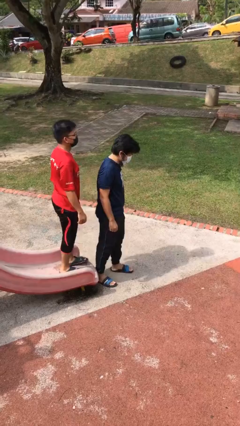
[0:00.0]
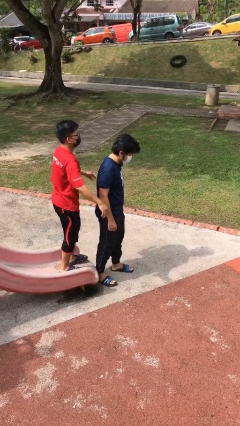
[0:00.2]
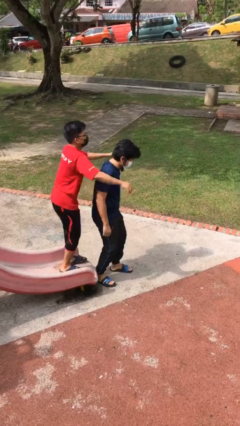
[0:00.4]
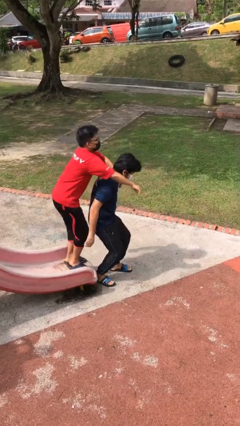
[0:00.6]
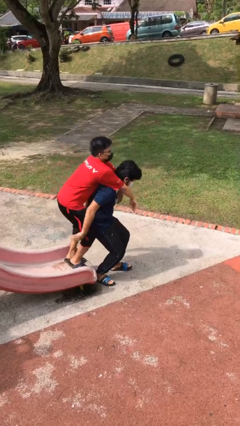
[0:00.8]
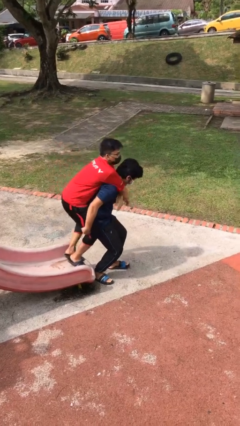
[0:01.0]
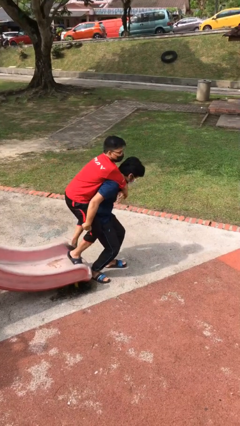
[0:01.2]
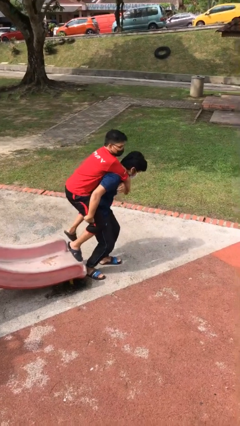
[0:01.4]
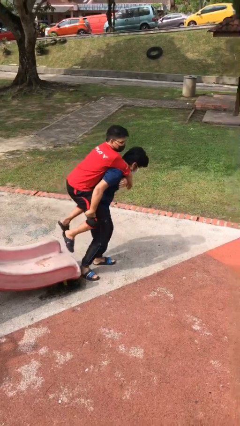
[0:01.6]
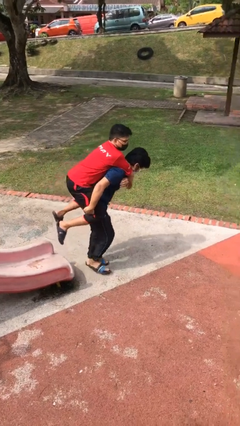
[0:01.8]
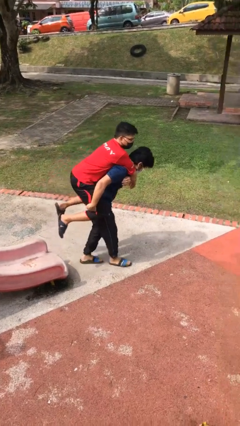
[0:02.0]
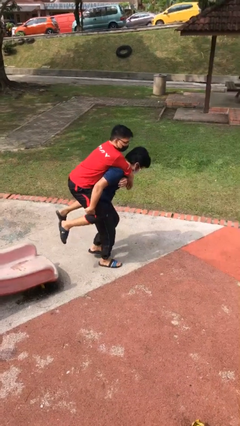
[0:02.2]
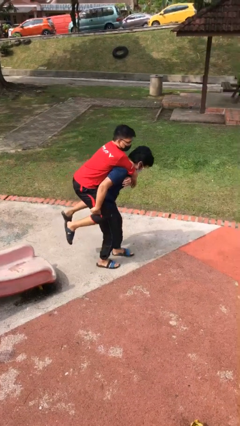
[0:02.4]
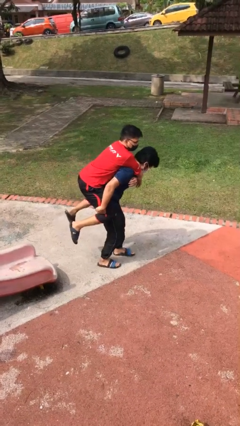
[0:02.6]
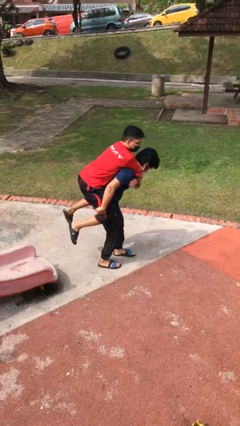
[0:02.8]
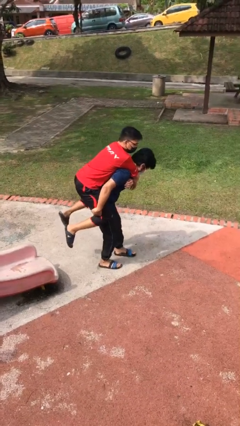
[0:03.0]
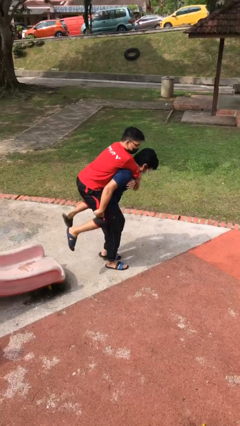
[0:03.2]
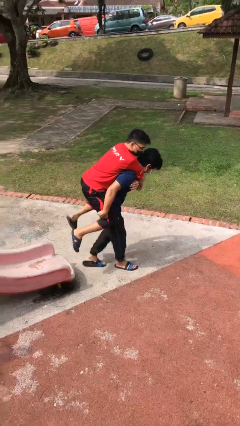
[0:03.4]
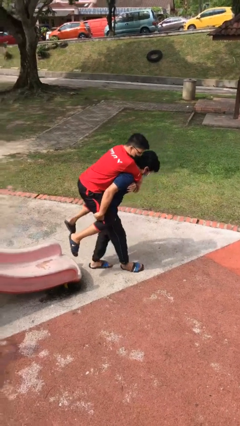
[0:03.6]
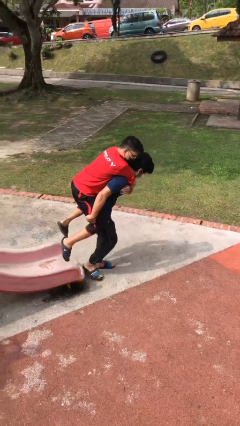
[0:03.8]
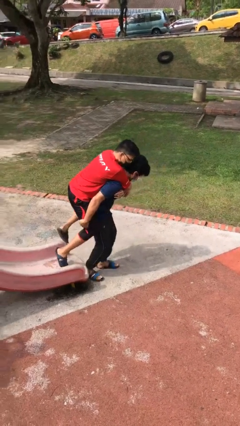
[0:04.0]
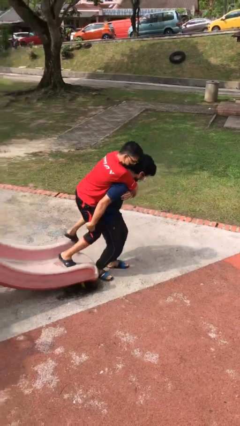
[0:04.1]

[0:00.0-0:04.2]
person carries person on back

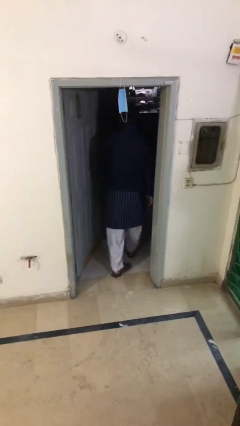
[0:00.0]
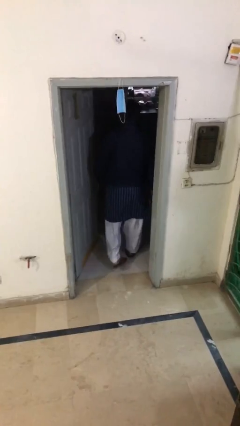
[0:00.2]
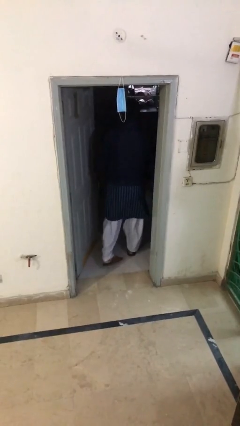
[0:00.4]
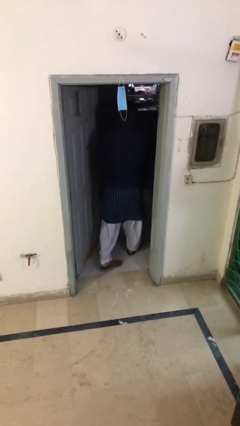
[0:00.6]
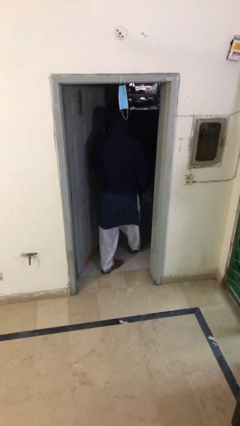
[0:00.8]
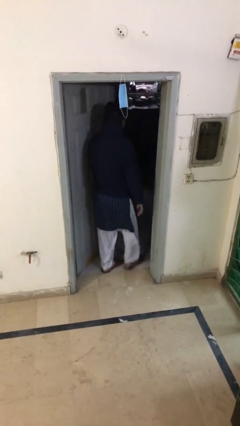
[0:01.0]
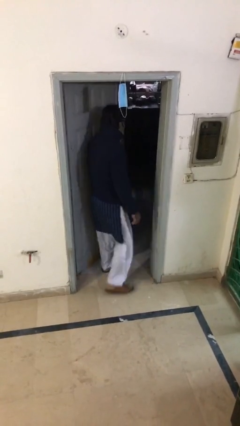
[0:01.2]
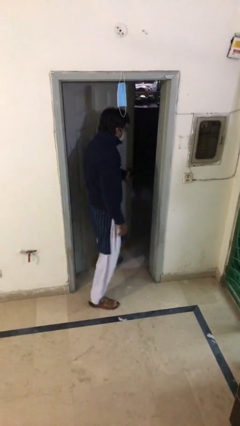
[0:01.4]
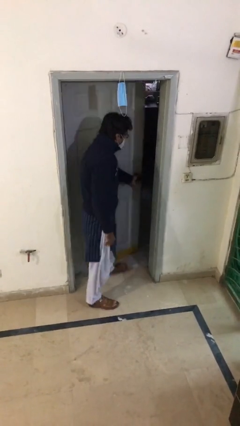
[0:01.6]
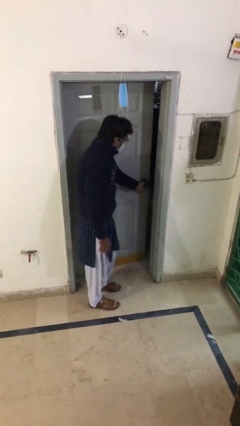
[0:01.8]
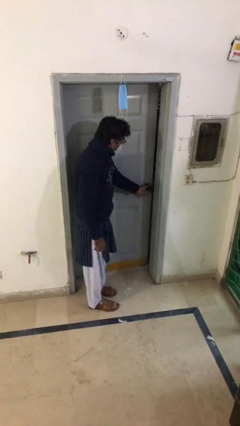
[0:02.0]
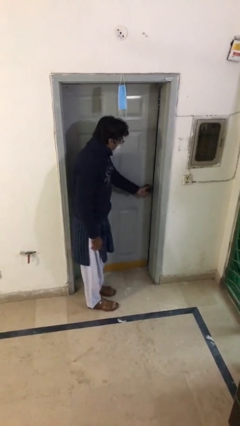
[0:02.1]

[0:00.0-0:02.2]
person closes facility door

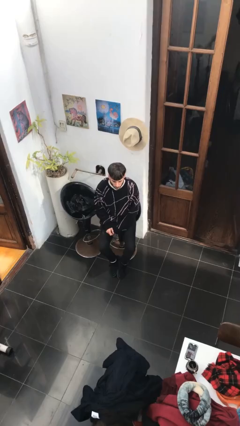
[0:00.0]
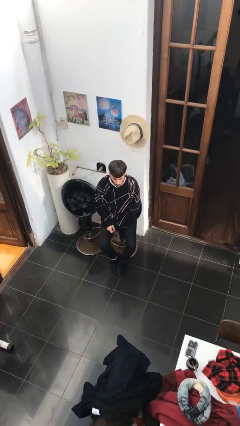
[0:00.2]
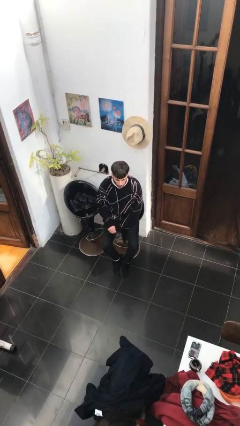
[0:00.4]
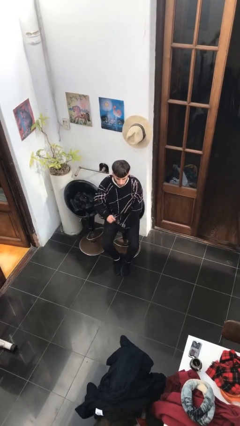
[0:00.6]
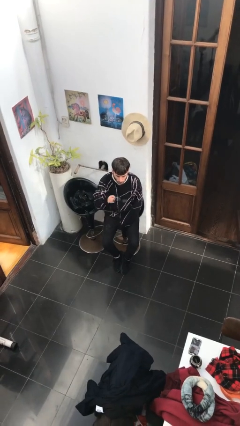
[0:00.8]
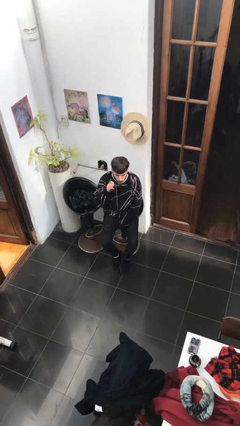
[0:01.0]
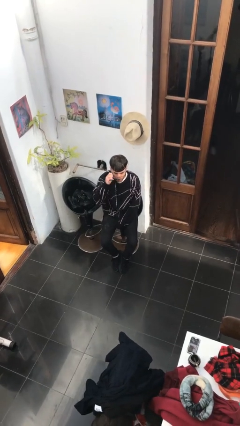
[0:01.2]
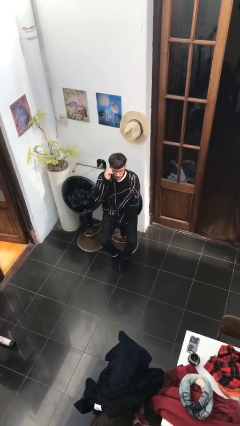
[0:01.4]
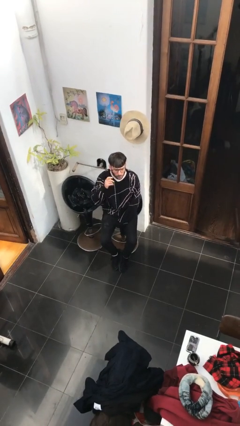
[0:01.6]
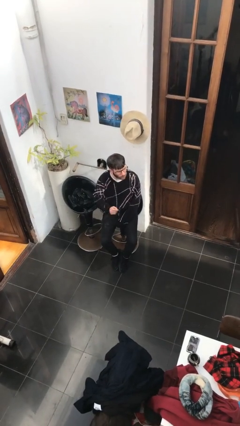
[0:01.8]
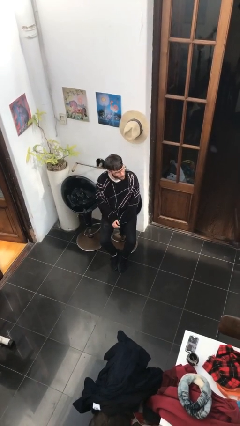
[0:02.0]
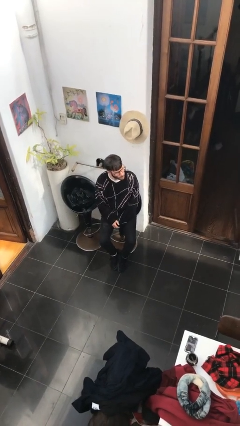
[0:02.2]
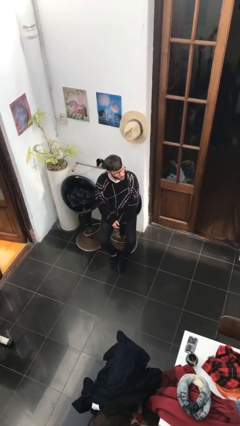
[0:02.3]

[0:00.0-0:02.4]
person puts on glasses

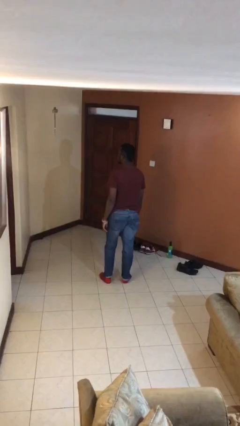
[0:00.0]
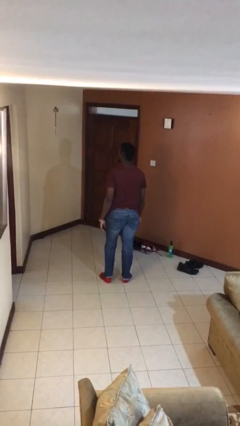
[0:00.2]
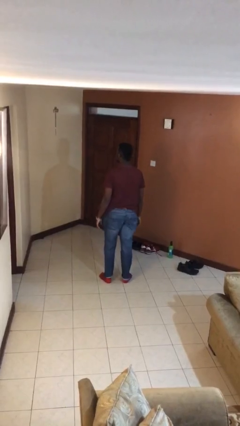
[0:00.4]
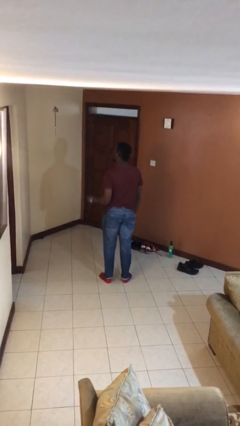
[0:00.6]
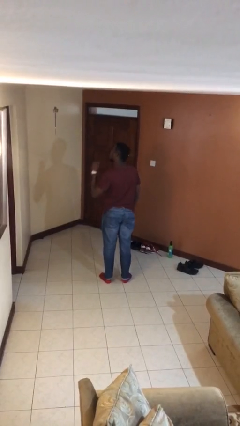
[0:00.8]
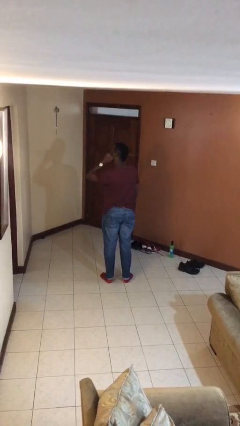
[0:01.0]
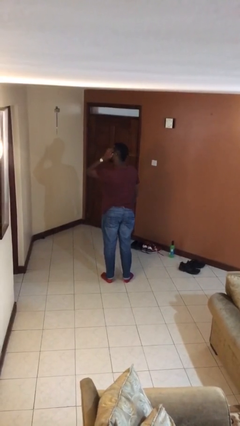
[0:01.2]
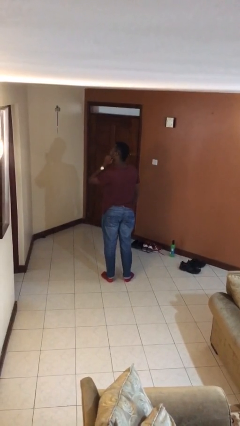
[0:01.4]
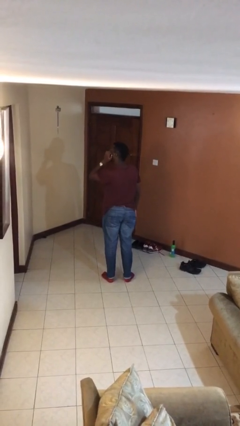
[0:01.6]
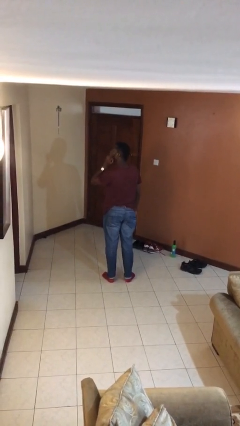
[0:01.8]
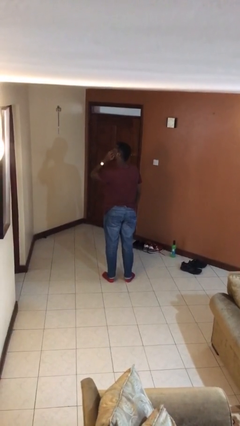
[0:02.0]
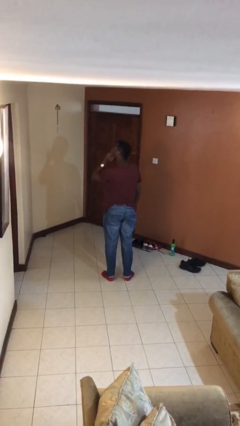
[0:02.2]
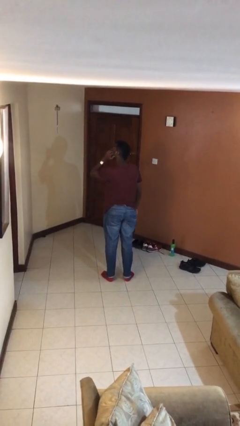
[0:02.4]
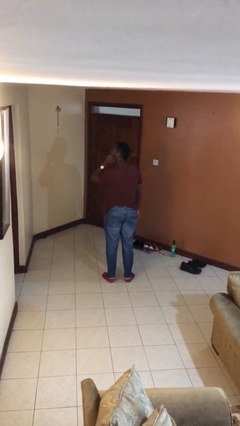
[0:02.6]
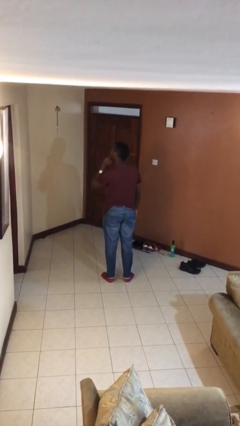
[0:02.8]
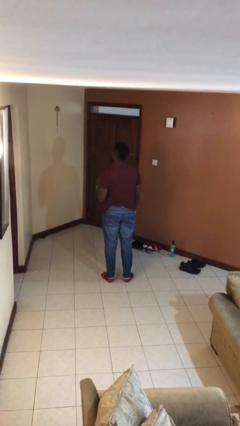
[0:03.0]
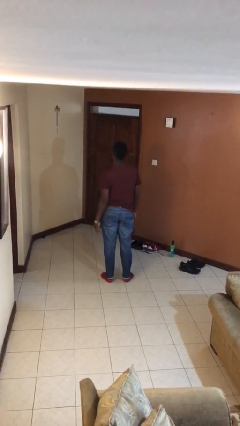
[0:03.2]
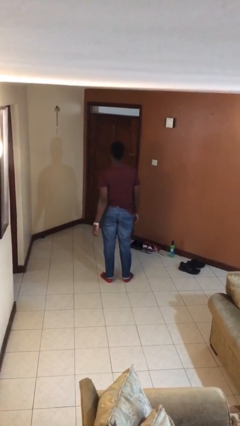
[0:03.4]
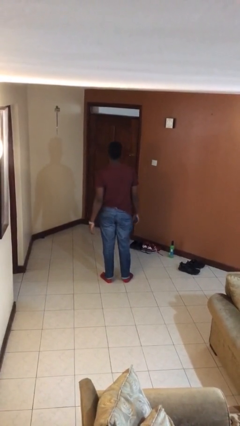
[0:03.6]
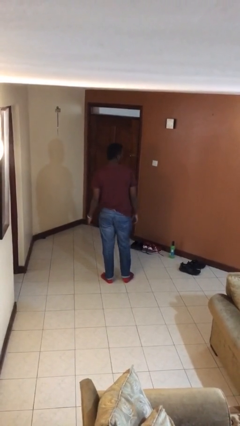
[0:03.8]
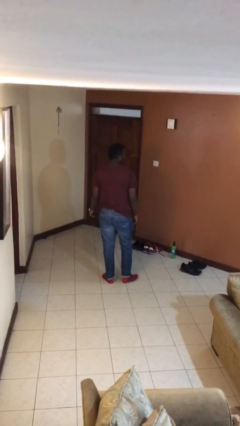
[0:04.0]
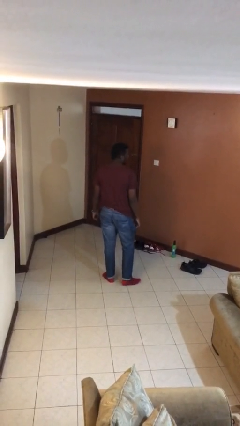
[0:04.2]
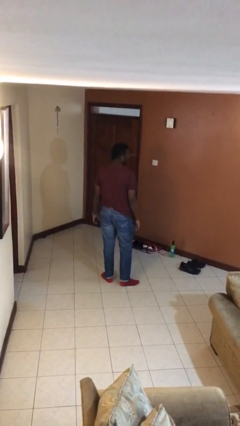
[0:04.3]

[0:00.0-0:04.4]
person scratches face

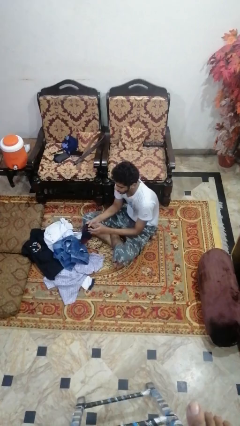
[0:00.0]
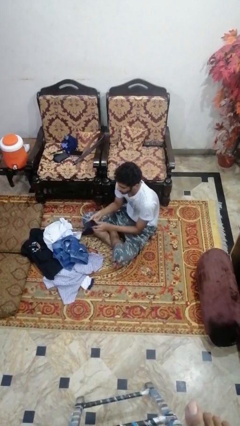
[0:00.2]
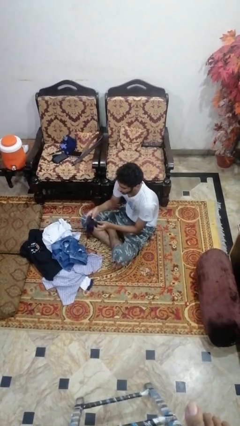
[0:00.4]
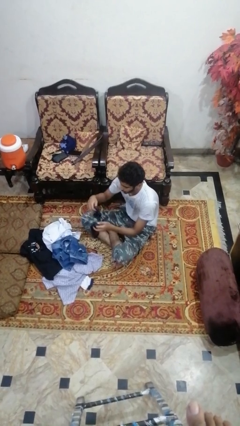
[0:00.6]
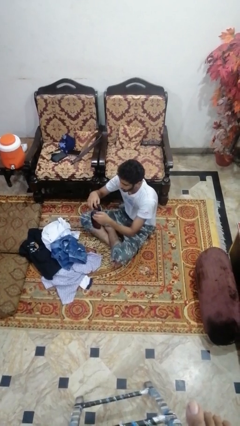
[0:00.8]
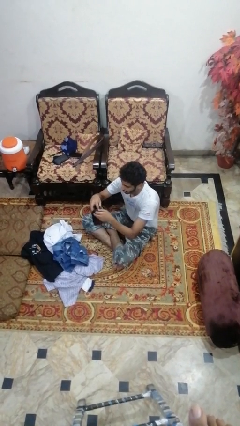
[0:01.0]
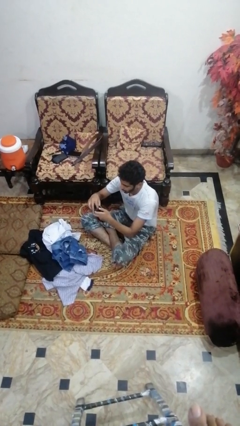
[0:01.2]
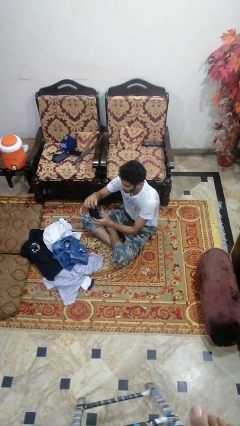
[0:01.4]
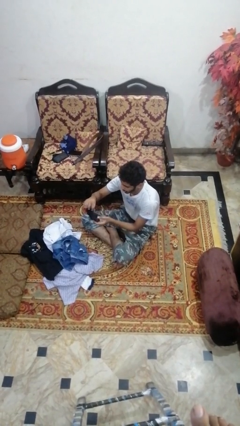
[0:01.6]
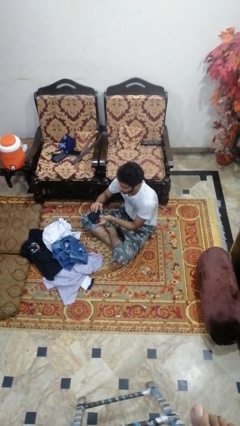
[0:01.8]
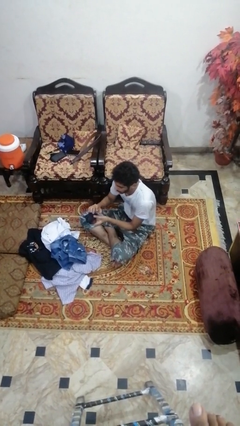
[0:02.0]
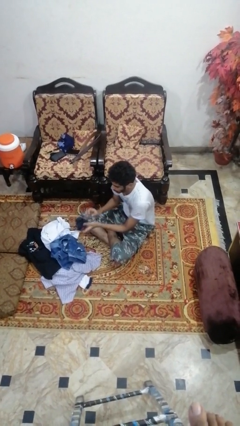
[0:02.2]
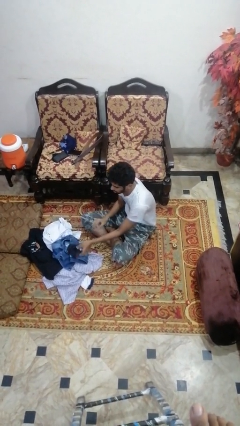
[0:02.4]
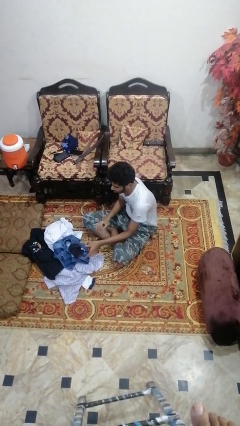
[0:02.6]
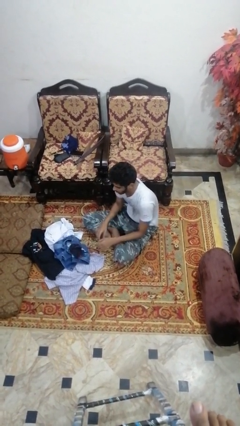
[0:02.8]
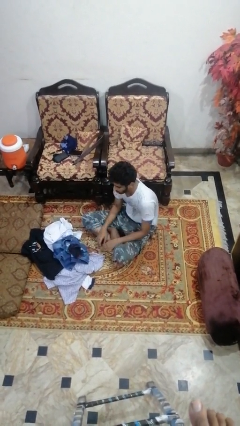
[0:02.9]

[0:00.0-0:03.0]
person folds socks

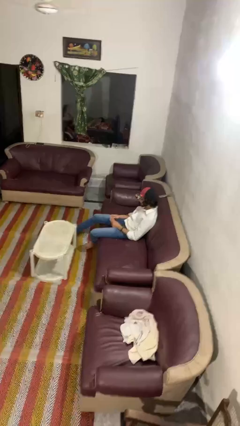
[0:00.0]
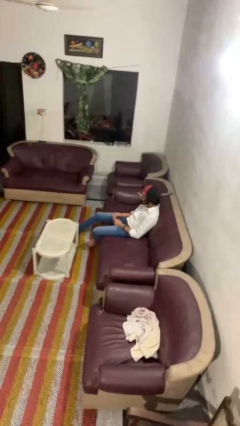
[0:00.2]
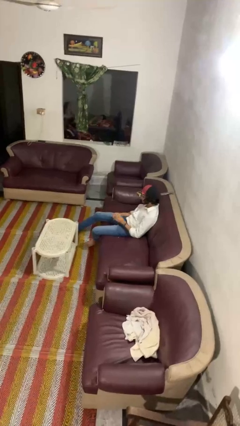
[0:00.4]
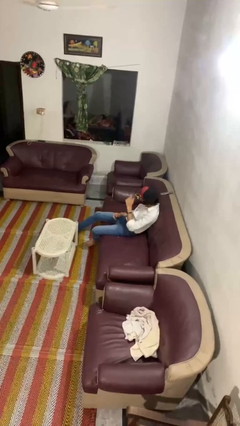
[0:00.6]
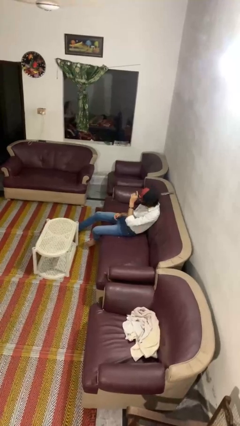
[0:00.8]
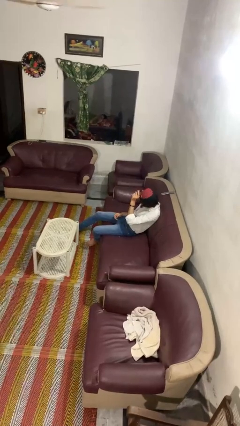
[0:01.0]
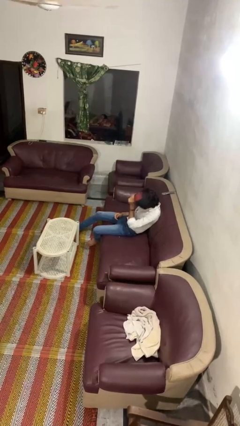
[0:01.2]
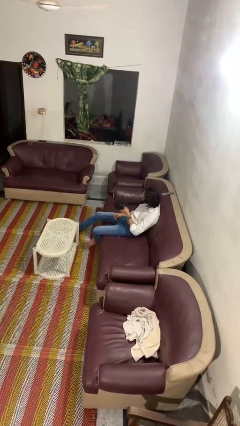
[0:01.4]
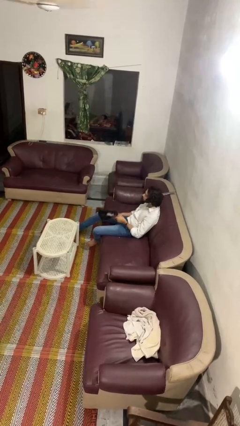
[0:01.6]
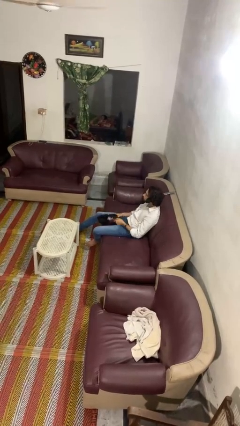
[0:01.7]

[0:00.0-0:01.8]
person takes off hat
